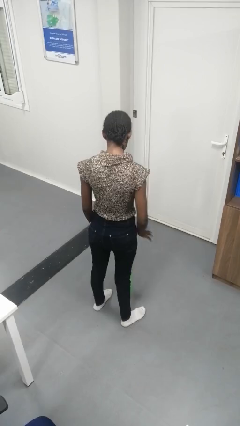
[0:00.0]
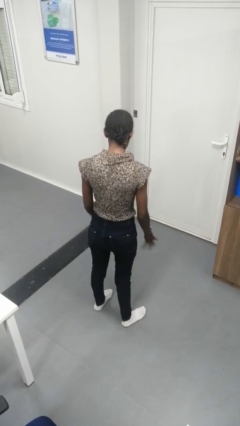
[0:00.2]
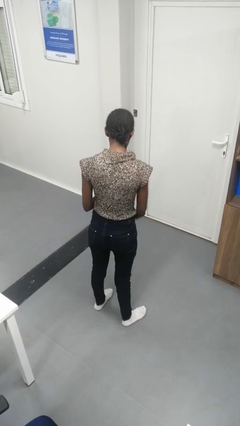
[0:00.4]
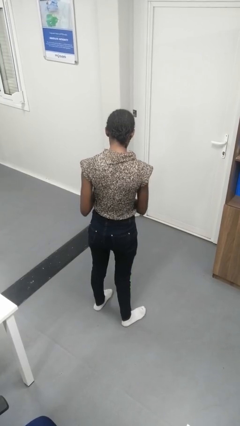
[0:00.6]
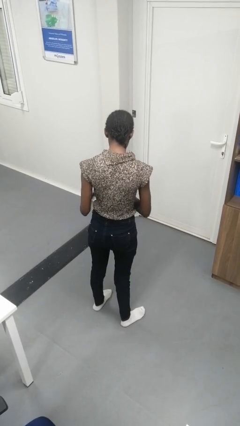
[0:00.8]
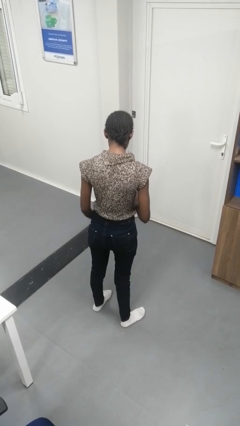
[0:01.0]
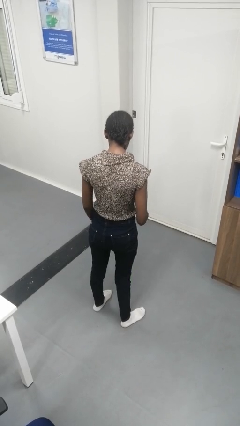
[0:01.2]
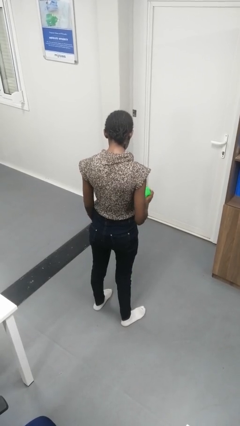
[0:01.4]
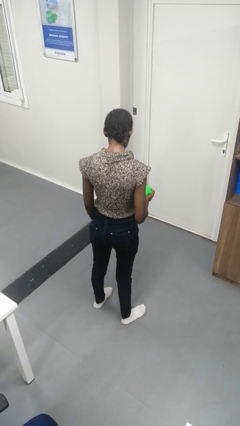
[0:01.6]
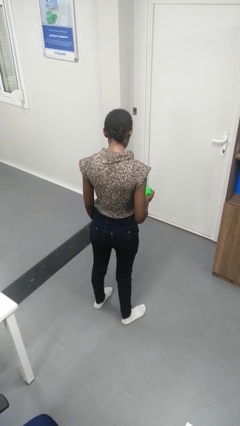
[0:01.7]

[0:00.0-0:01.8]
person bounces ball on floor

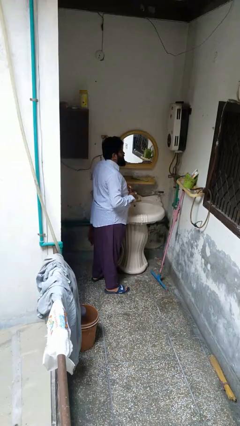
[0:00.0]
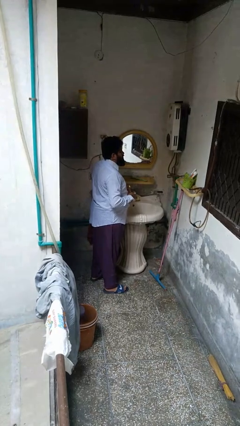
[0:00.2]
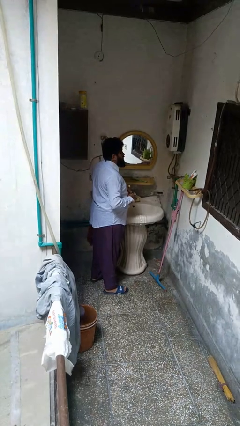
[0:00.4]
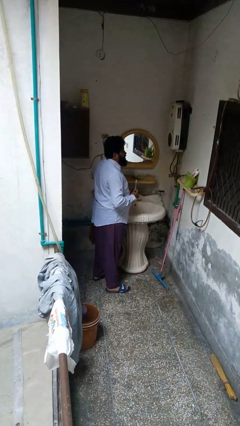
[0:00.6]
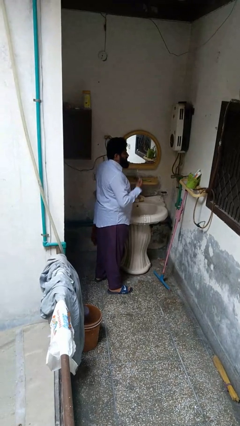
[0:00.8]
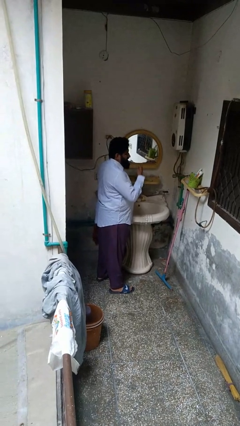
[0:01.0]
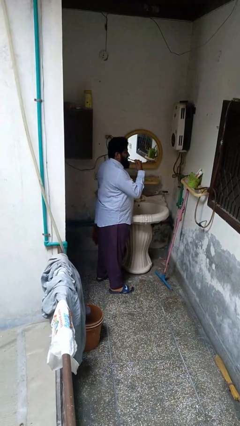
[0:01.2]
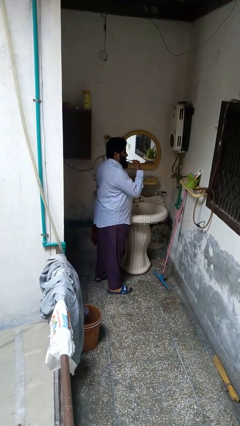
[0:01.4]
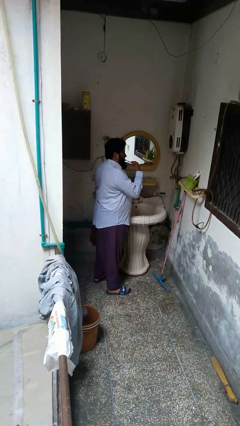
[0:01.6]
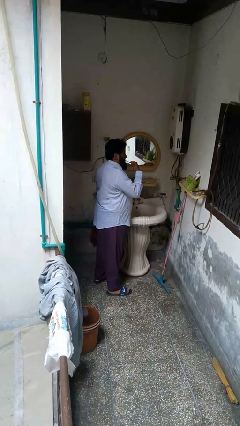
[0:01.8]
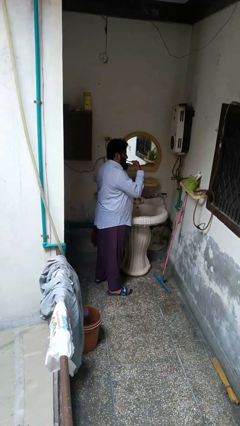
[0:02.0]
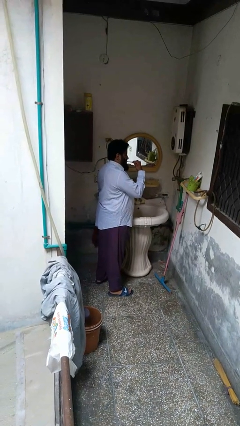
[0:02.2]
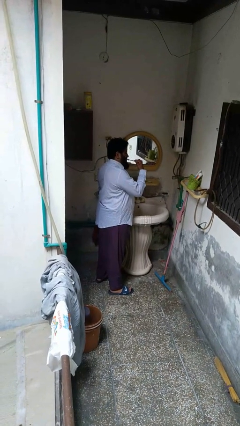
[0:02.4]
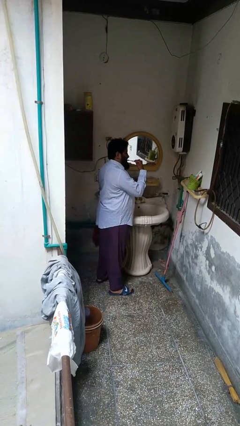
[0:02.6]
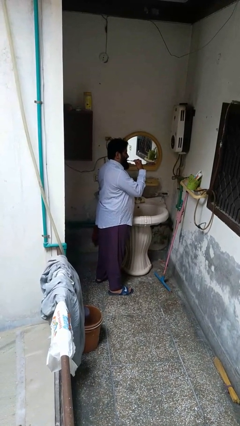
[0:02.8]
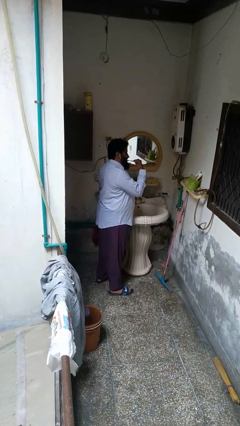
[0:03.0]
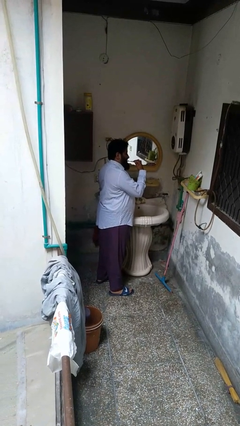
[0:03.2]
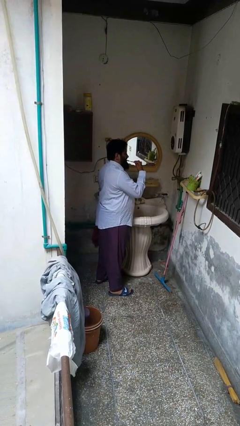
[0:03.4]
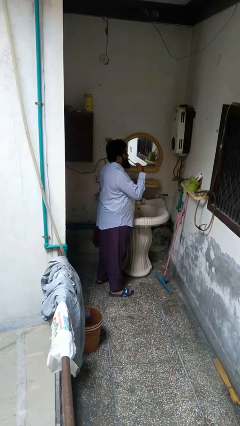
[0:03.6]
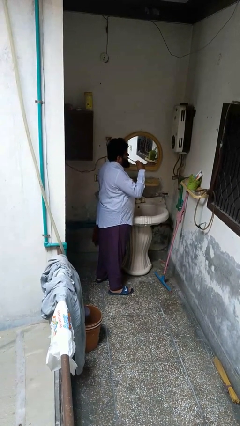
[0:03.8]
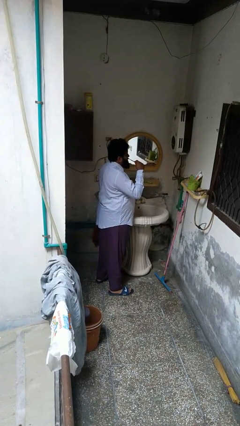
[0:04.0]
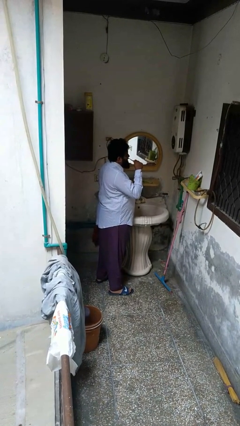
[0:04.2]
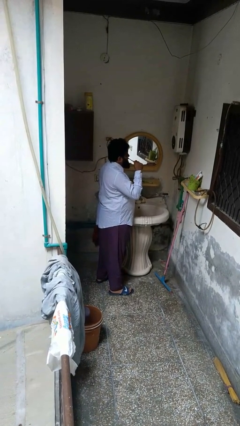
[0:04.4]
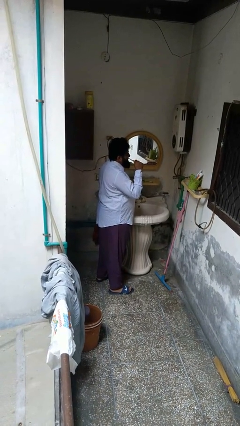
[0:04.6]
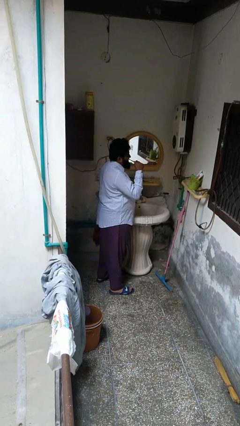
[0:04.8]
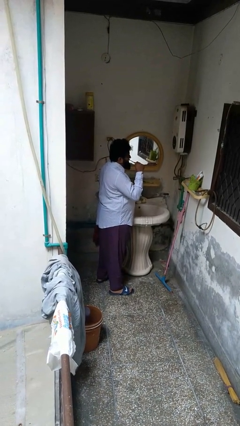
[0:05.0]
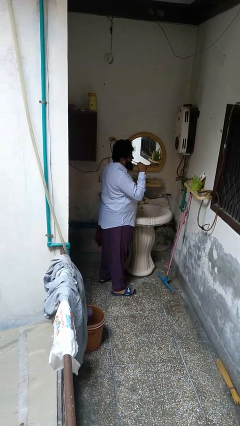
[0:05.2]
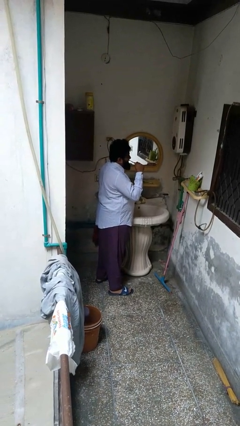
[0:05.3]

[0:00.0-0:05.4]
person brushes teeth

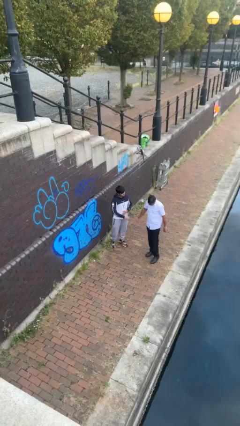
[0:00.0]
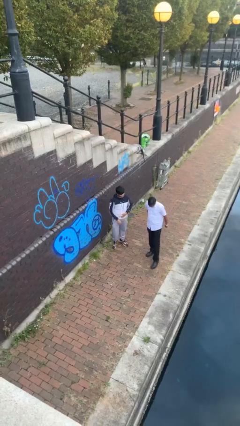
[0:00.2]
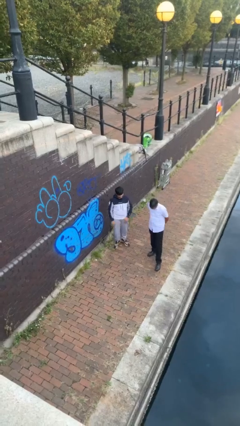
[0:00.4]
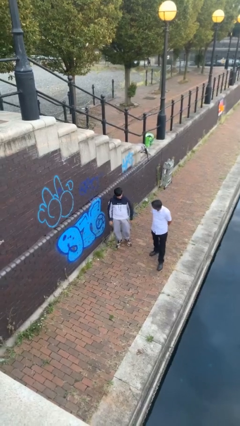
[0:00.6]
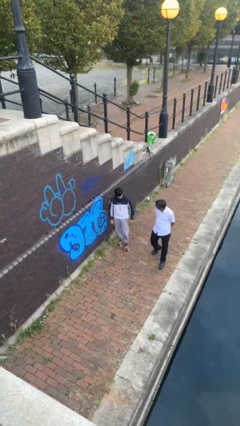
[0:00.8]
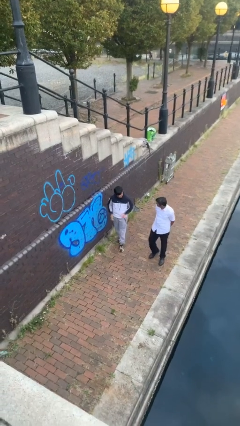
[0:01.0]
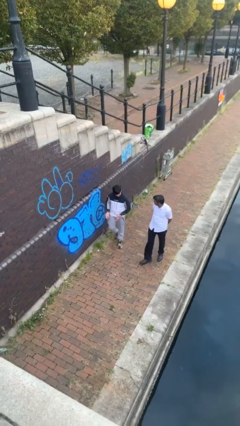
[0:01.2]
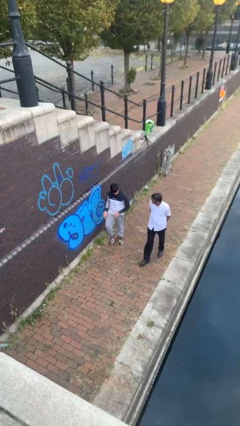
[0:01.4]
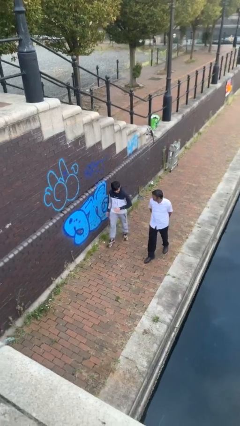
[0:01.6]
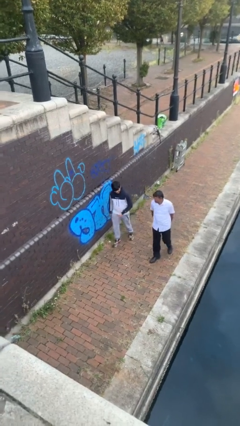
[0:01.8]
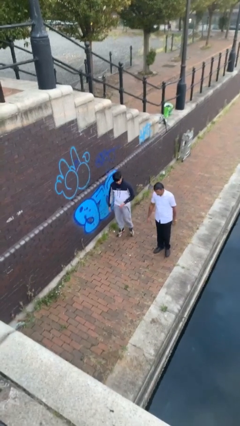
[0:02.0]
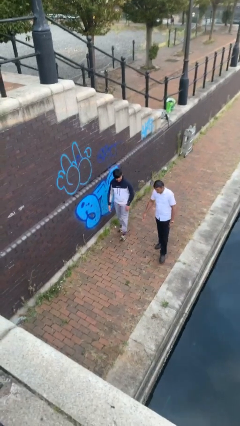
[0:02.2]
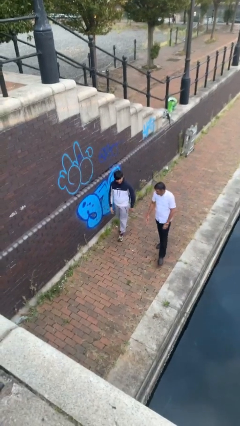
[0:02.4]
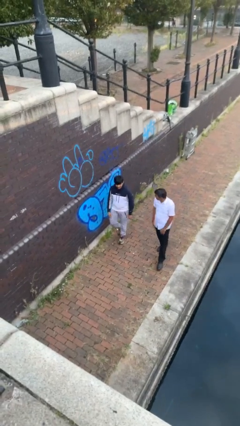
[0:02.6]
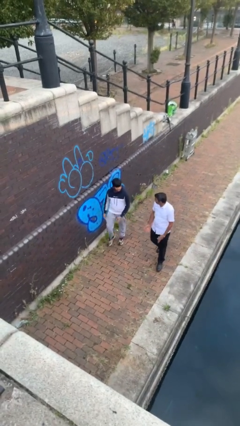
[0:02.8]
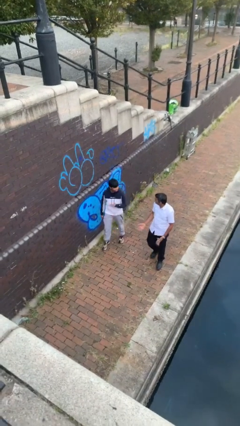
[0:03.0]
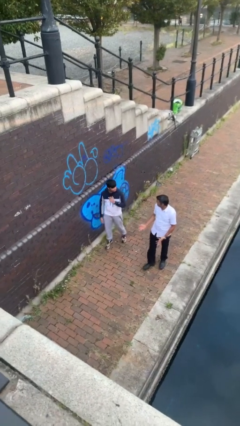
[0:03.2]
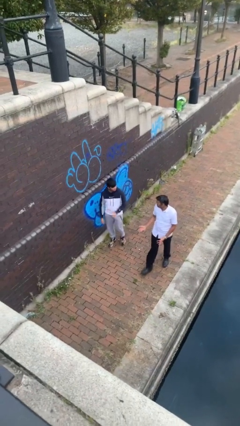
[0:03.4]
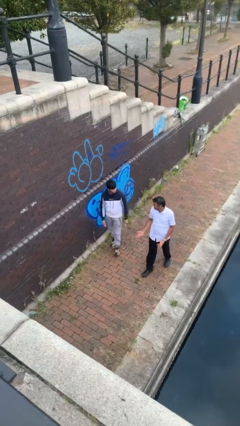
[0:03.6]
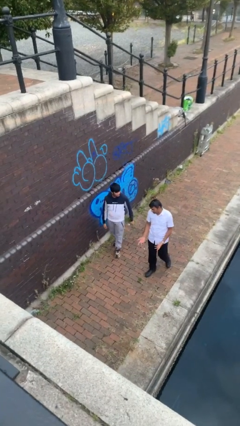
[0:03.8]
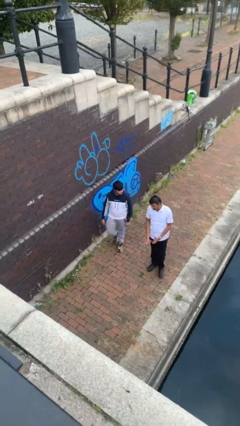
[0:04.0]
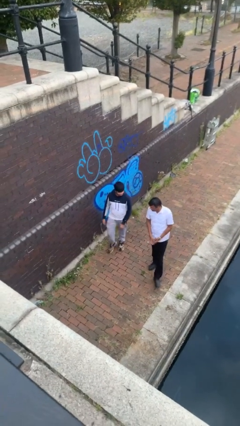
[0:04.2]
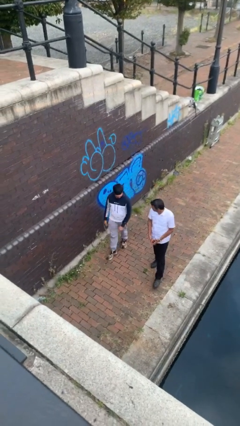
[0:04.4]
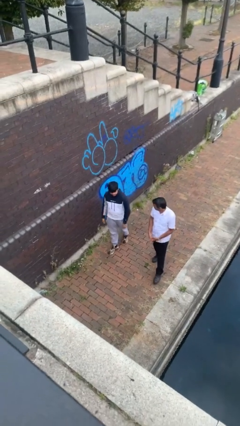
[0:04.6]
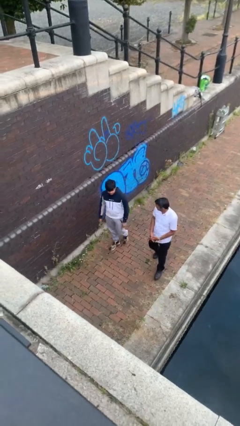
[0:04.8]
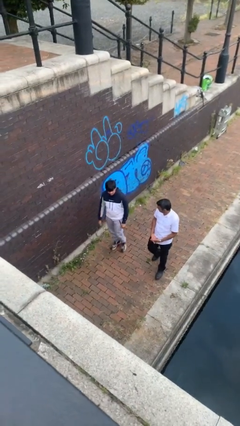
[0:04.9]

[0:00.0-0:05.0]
person talks to person

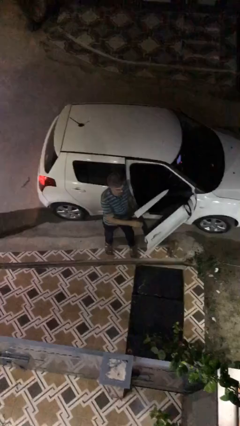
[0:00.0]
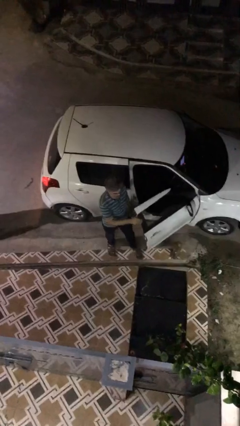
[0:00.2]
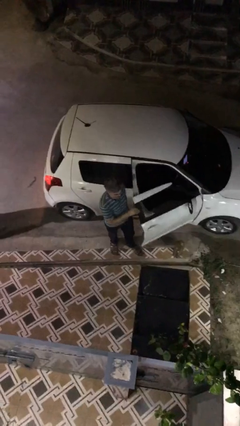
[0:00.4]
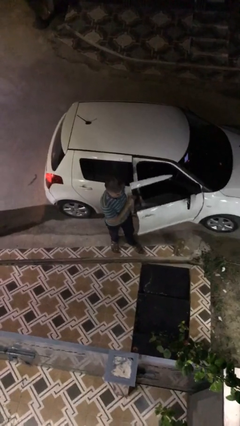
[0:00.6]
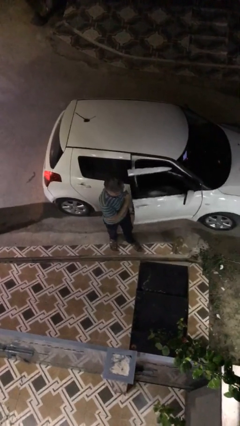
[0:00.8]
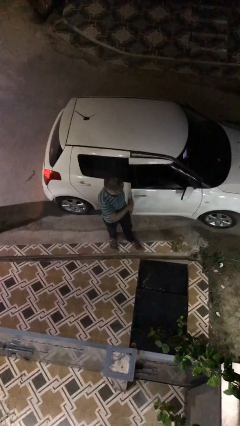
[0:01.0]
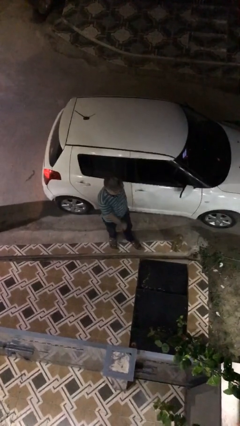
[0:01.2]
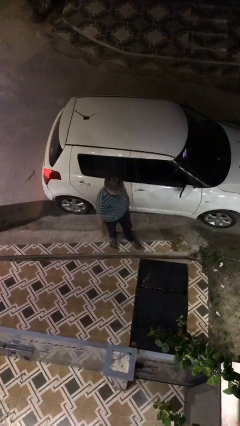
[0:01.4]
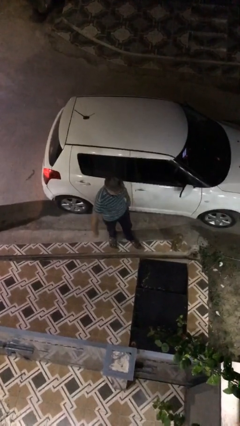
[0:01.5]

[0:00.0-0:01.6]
person closes car door

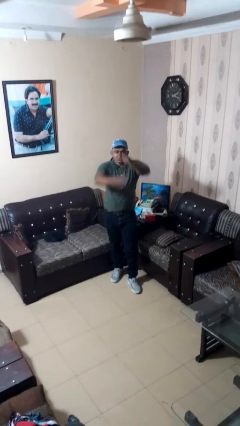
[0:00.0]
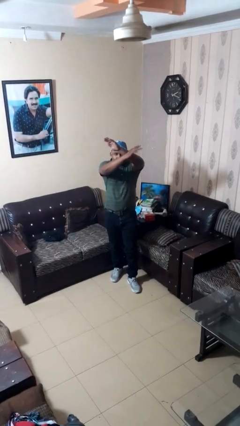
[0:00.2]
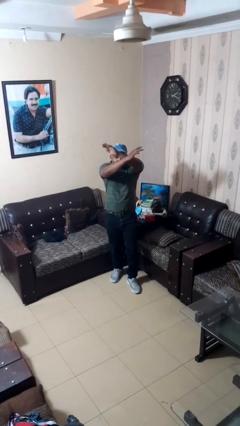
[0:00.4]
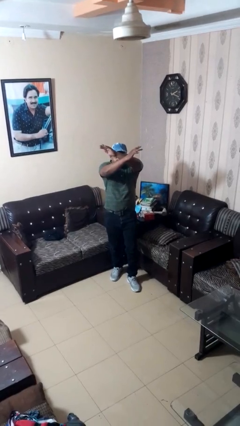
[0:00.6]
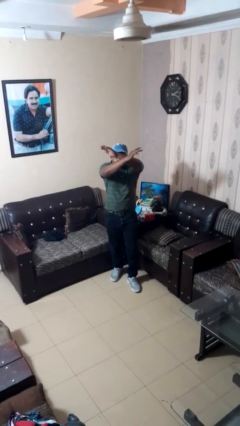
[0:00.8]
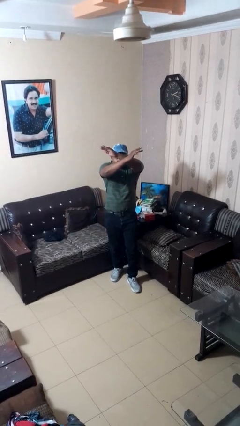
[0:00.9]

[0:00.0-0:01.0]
person gestures arms x

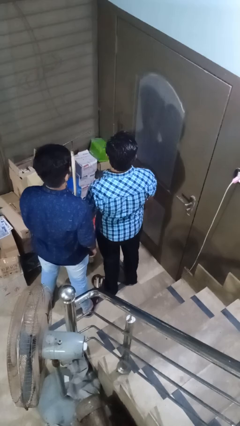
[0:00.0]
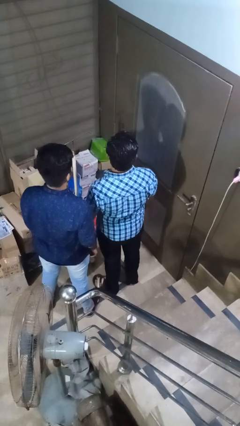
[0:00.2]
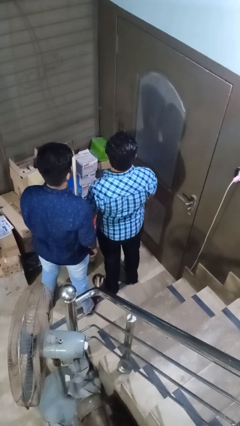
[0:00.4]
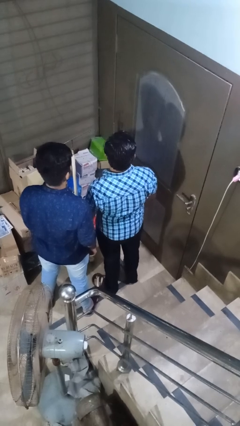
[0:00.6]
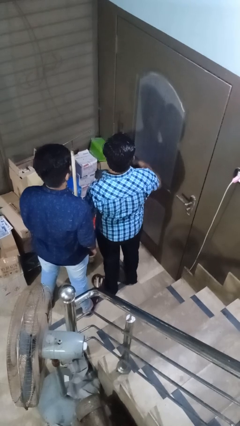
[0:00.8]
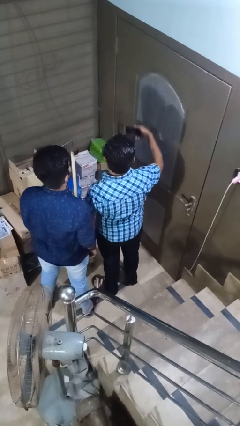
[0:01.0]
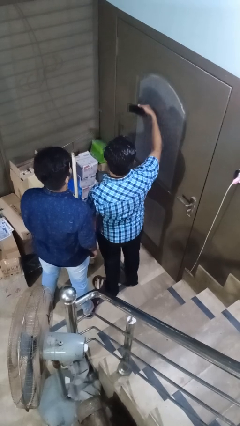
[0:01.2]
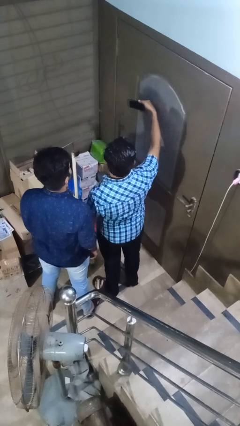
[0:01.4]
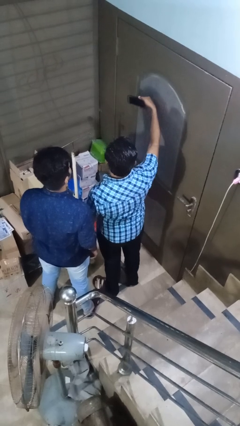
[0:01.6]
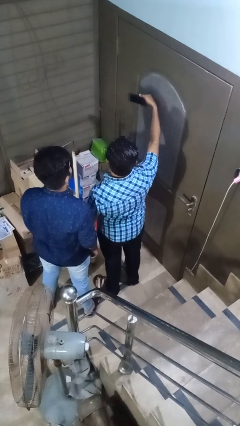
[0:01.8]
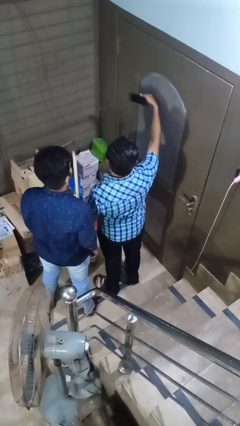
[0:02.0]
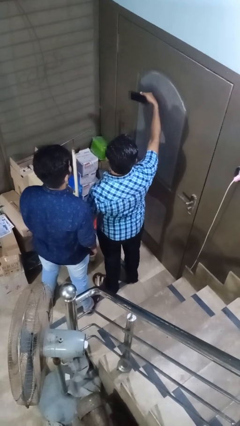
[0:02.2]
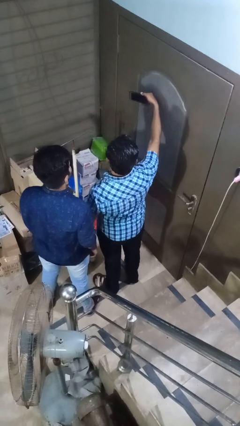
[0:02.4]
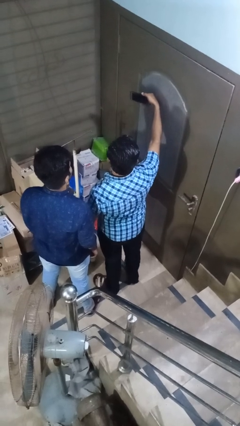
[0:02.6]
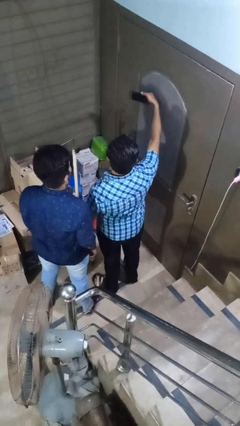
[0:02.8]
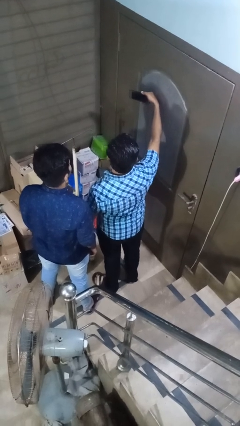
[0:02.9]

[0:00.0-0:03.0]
person takes selfie with person
